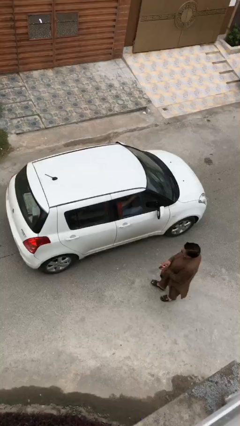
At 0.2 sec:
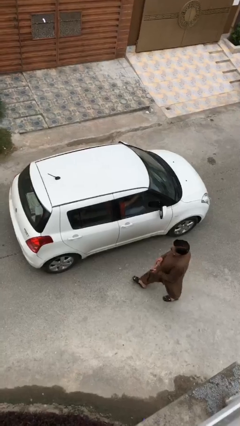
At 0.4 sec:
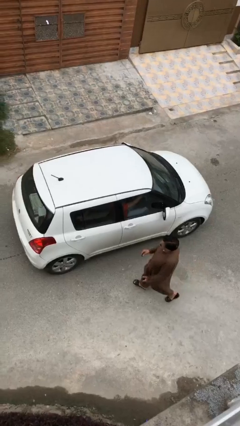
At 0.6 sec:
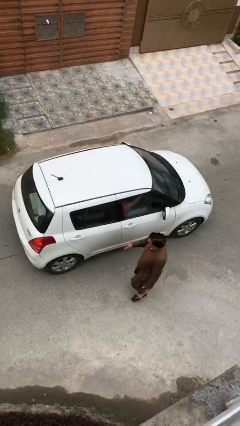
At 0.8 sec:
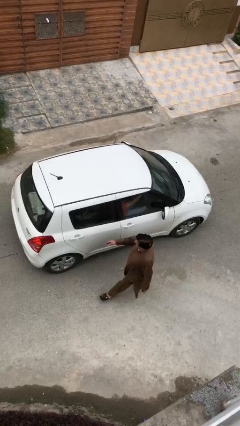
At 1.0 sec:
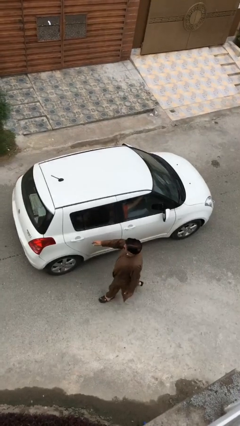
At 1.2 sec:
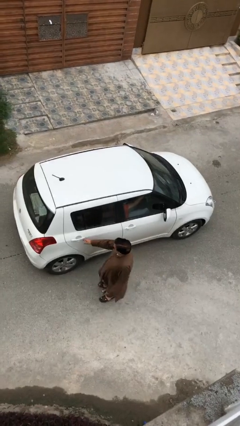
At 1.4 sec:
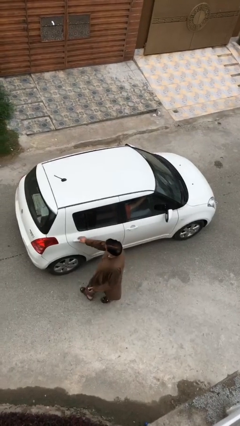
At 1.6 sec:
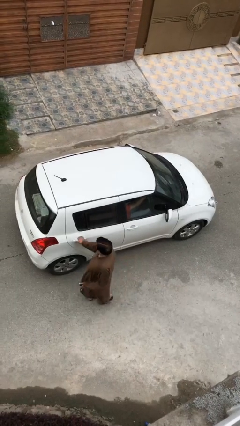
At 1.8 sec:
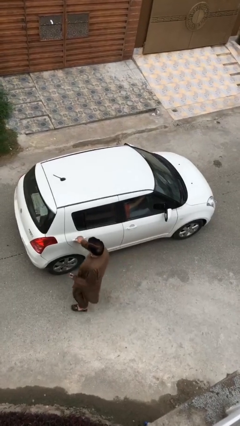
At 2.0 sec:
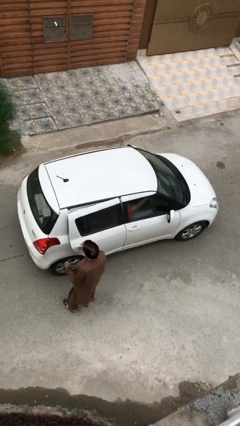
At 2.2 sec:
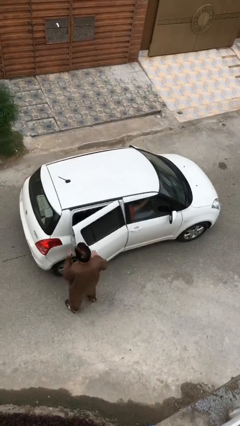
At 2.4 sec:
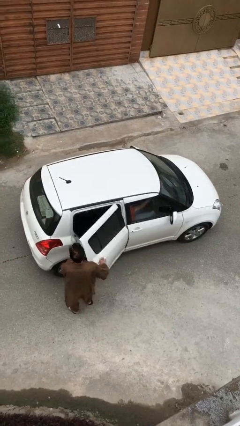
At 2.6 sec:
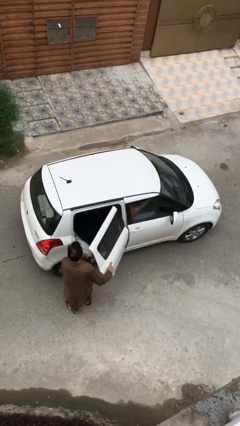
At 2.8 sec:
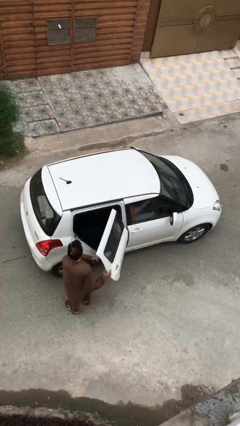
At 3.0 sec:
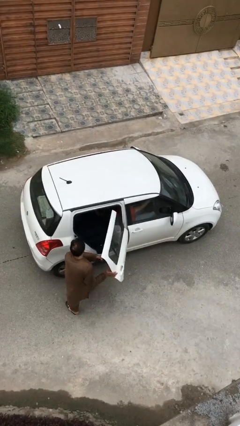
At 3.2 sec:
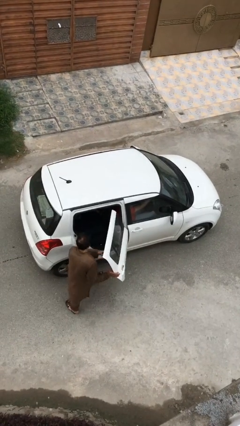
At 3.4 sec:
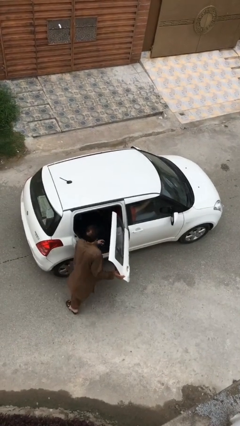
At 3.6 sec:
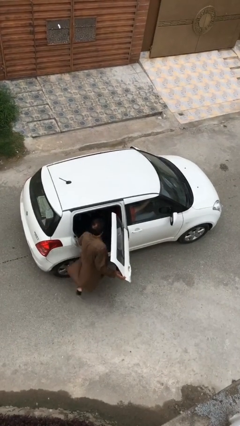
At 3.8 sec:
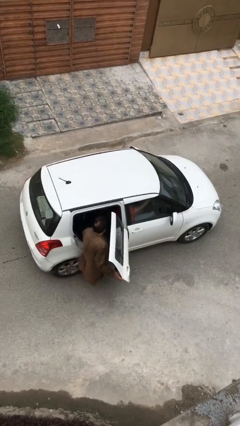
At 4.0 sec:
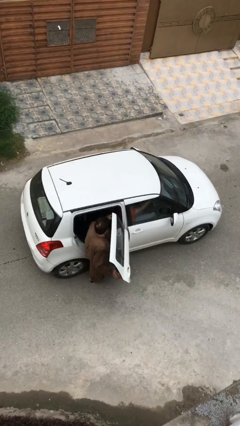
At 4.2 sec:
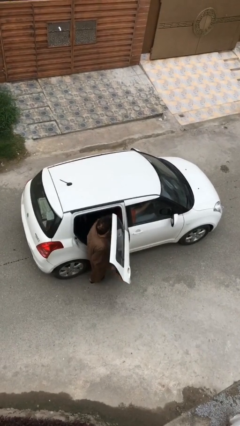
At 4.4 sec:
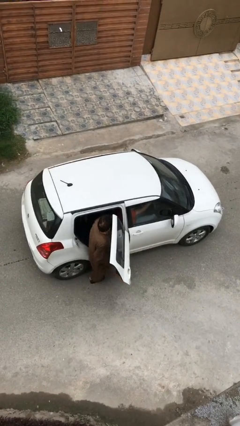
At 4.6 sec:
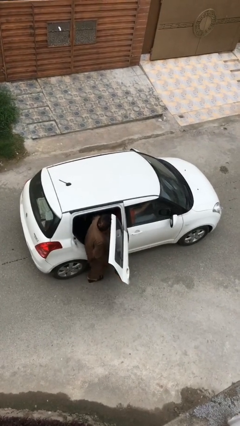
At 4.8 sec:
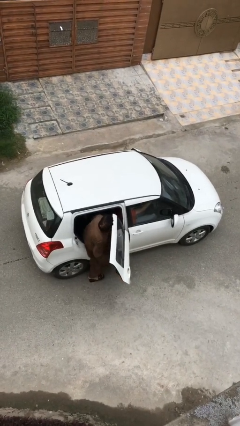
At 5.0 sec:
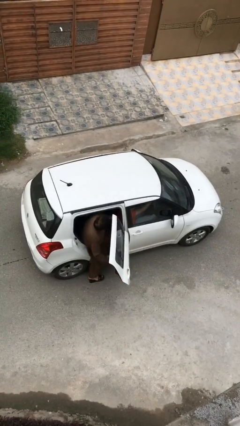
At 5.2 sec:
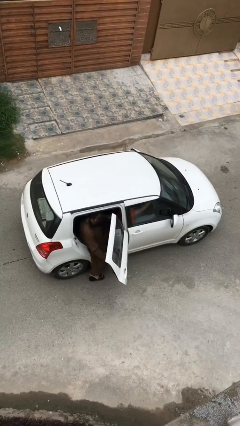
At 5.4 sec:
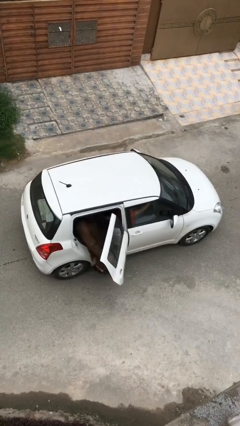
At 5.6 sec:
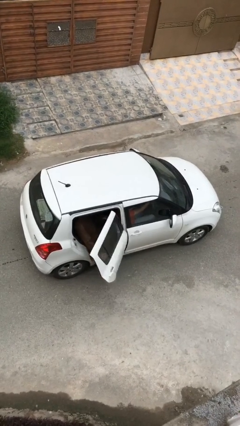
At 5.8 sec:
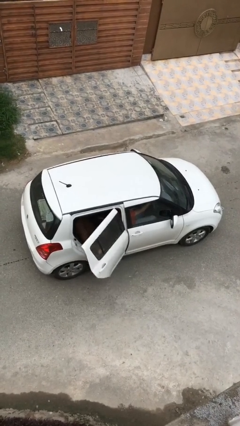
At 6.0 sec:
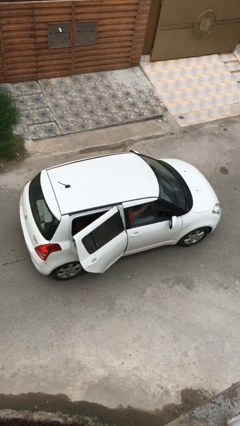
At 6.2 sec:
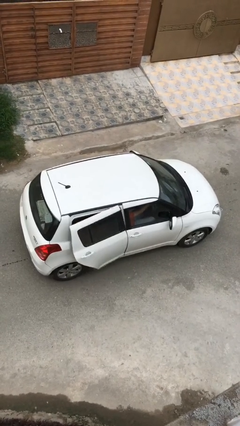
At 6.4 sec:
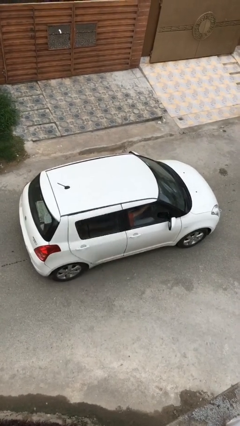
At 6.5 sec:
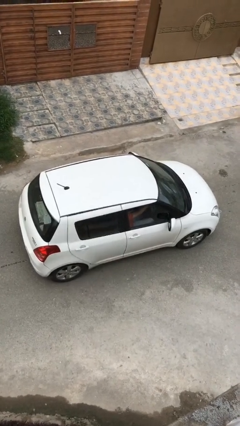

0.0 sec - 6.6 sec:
car picks up person

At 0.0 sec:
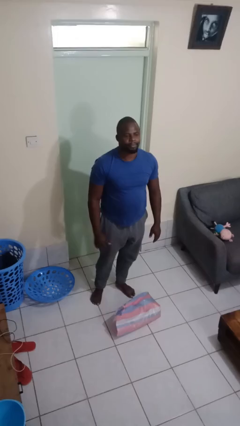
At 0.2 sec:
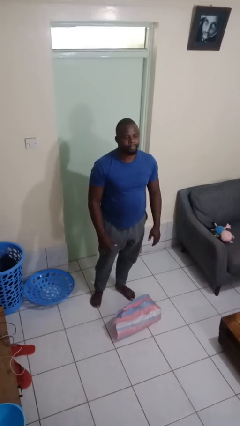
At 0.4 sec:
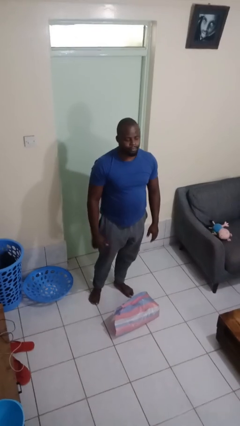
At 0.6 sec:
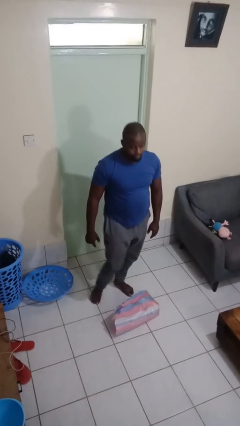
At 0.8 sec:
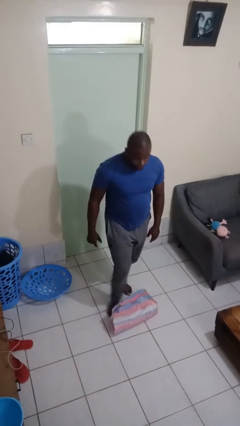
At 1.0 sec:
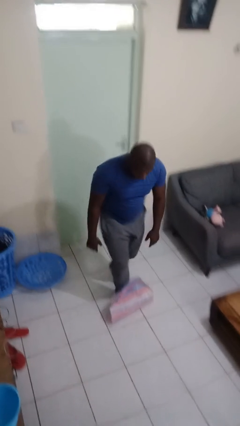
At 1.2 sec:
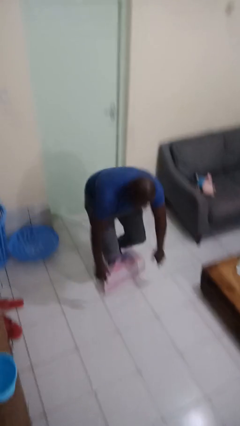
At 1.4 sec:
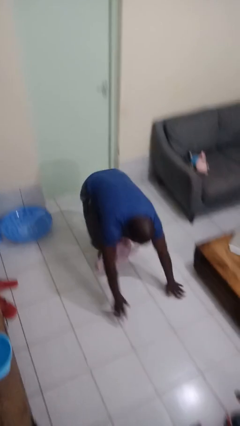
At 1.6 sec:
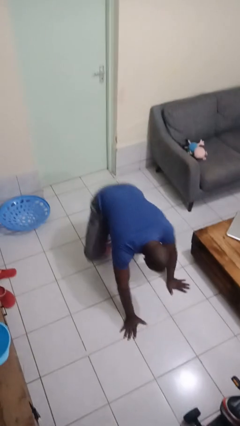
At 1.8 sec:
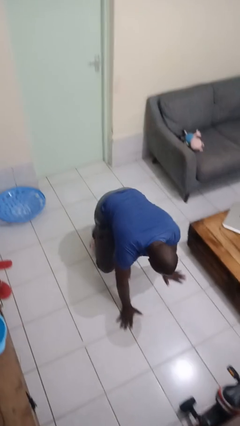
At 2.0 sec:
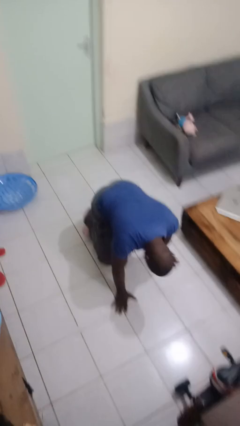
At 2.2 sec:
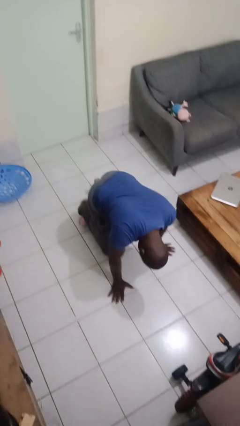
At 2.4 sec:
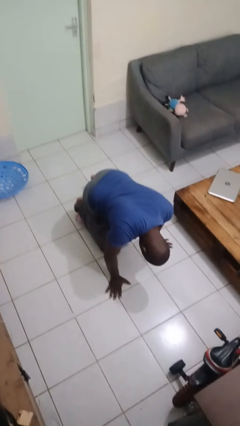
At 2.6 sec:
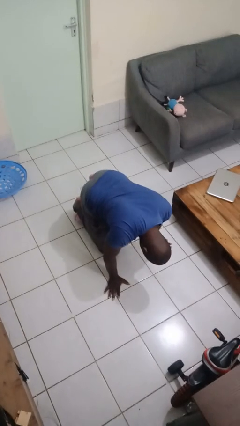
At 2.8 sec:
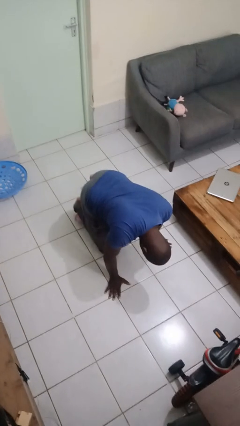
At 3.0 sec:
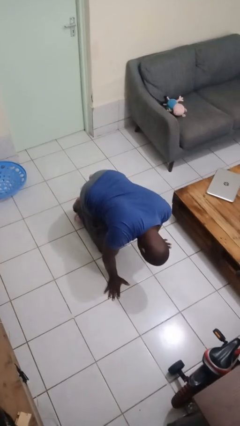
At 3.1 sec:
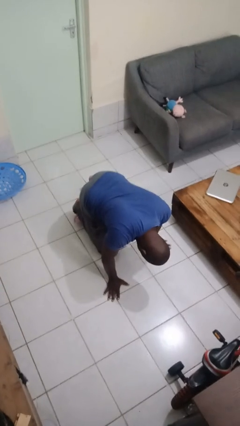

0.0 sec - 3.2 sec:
person trips on object on floor

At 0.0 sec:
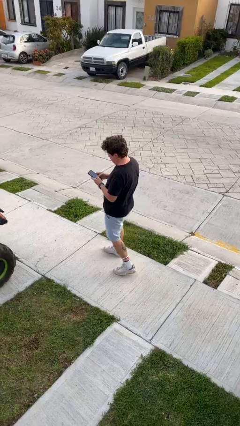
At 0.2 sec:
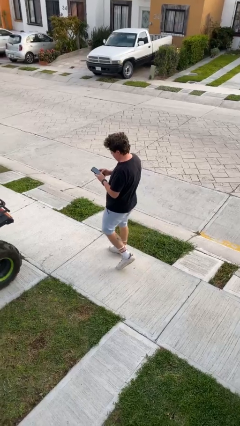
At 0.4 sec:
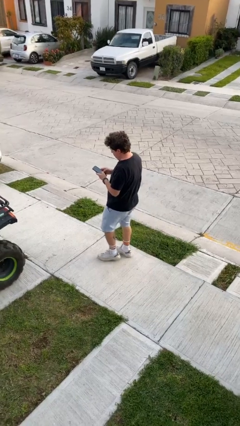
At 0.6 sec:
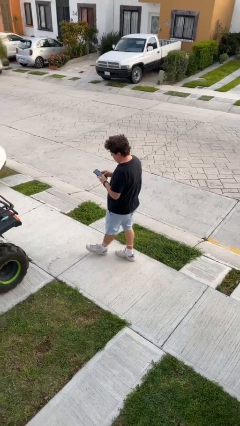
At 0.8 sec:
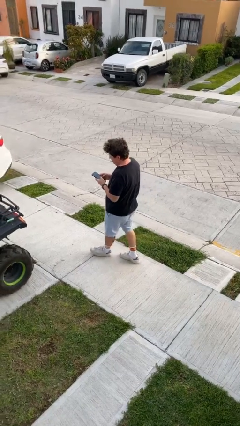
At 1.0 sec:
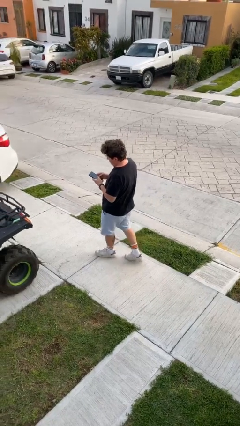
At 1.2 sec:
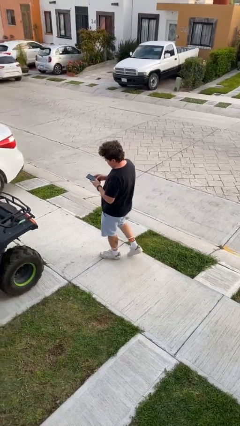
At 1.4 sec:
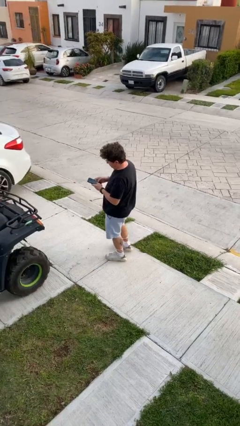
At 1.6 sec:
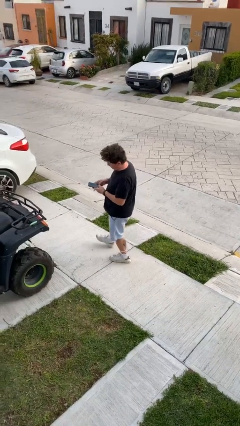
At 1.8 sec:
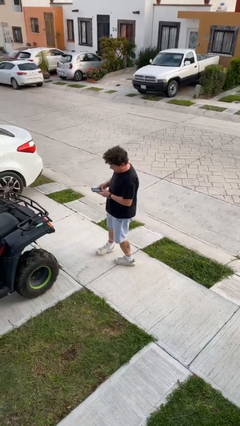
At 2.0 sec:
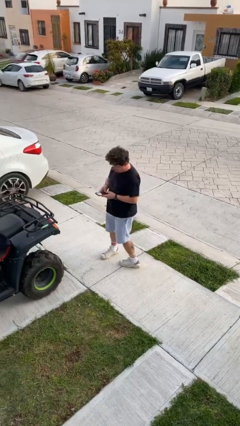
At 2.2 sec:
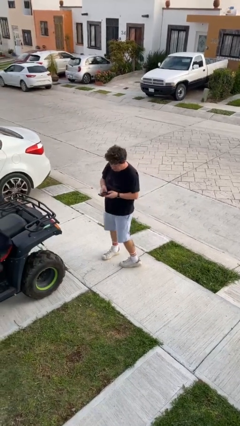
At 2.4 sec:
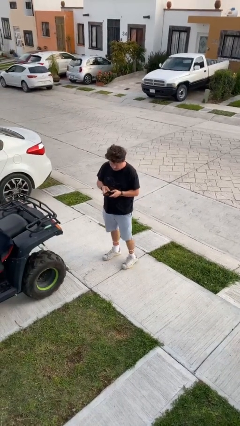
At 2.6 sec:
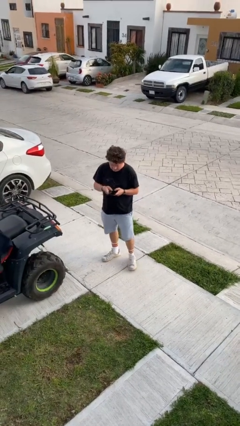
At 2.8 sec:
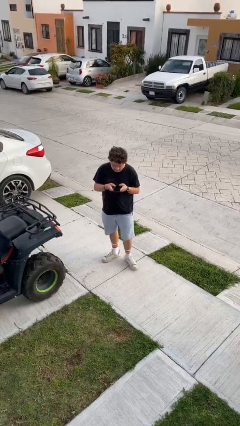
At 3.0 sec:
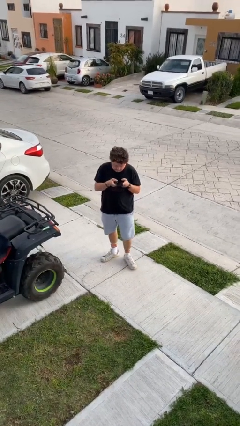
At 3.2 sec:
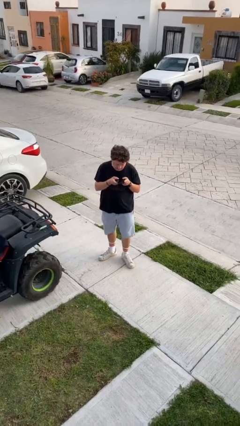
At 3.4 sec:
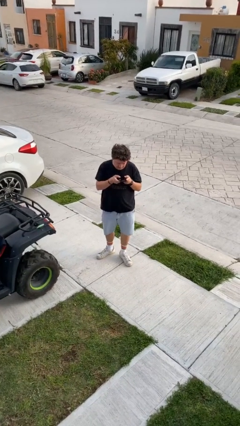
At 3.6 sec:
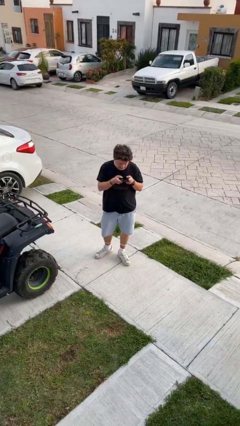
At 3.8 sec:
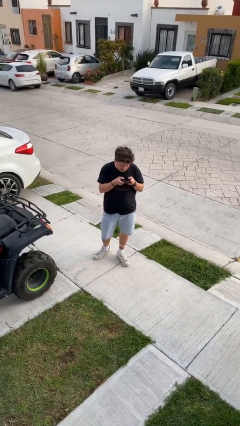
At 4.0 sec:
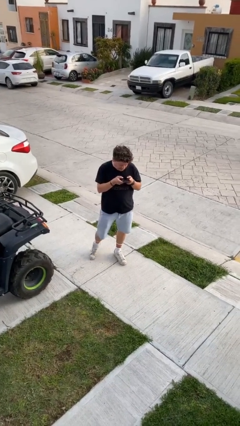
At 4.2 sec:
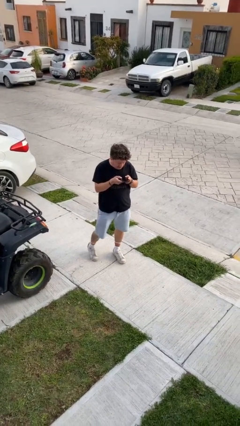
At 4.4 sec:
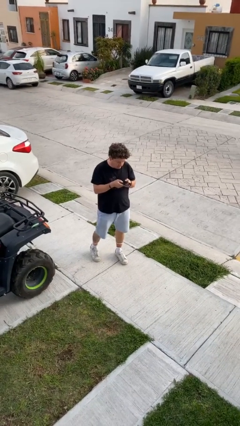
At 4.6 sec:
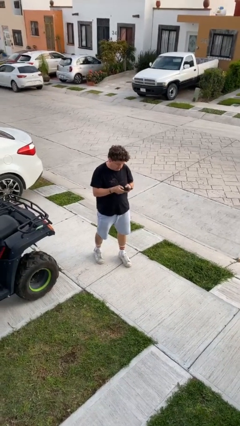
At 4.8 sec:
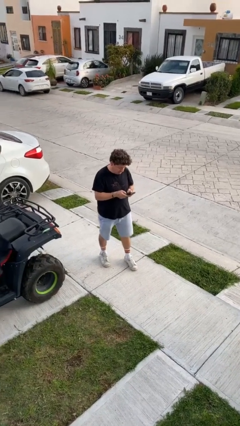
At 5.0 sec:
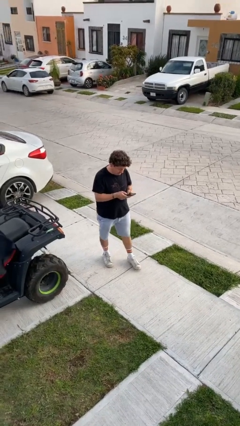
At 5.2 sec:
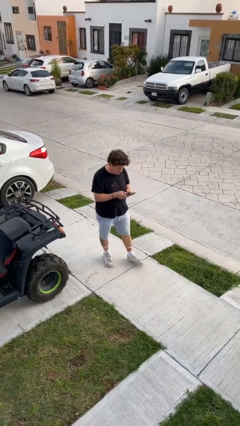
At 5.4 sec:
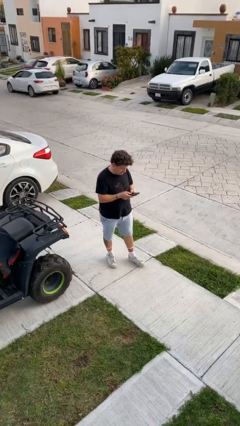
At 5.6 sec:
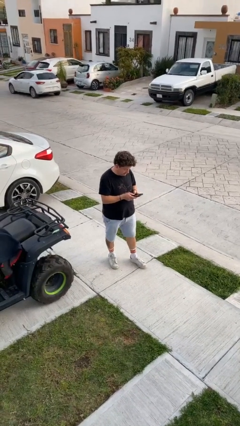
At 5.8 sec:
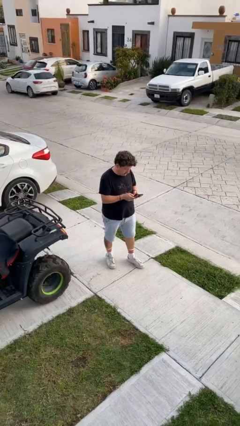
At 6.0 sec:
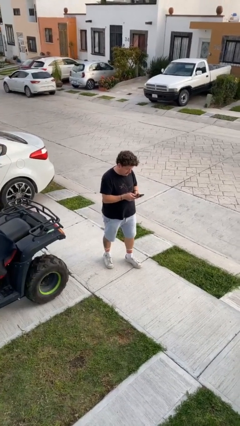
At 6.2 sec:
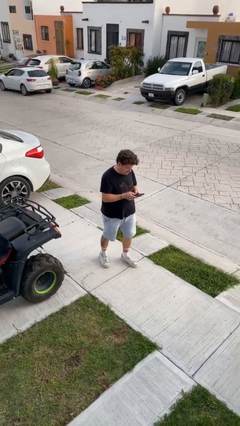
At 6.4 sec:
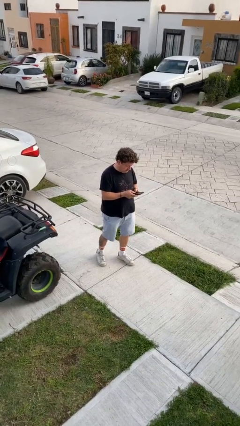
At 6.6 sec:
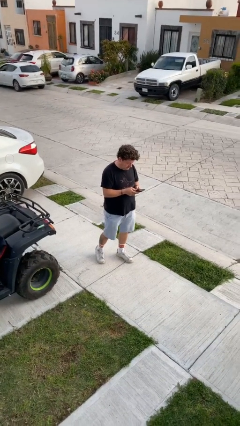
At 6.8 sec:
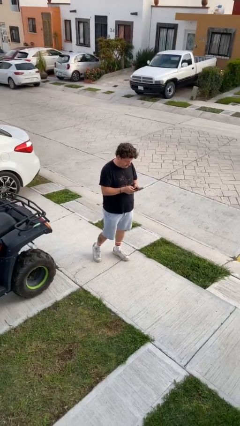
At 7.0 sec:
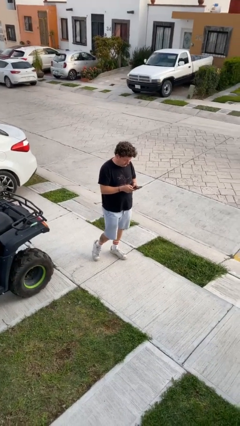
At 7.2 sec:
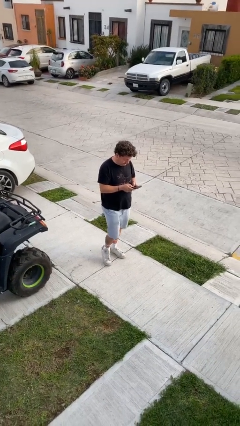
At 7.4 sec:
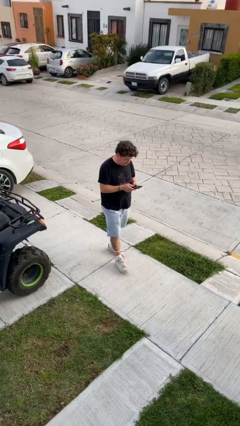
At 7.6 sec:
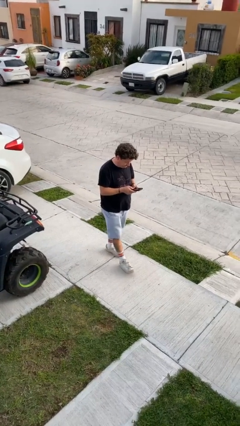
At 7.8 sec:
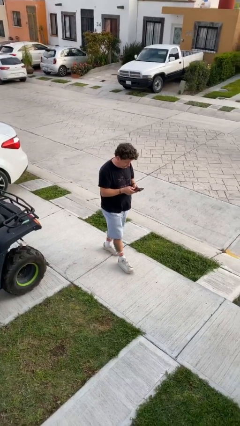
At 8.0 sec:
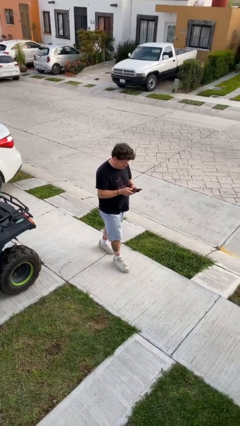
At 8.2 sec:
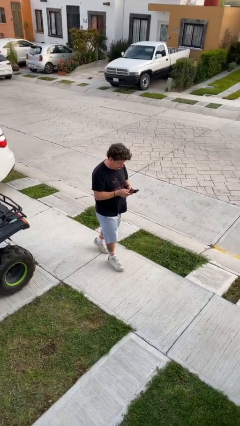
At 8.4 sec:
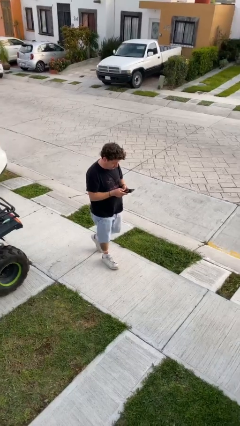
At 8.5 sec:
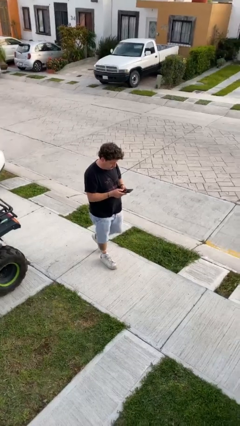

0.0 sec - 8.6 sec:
person texts on phone
